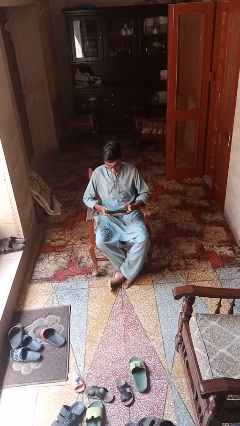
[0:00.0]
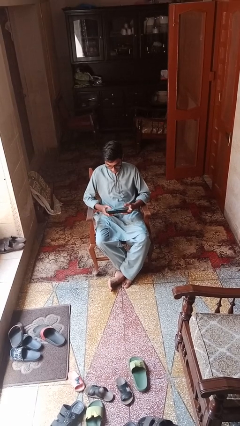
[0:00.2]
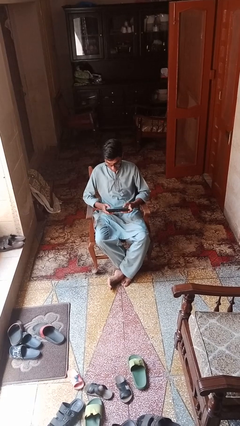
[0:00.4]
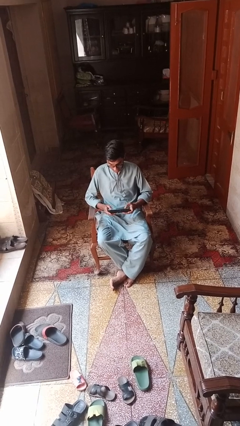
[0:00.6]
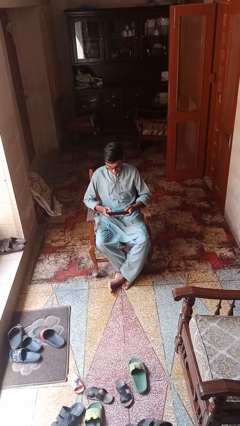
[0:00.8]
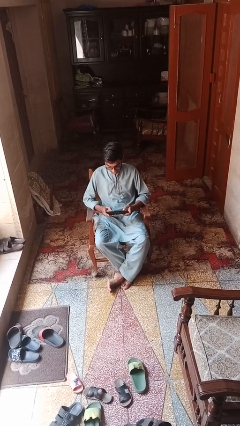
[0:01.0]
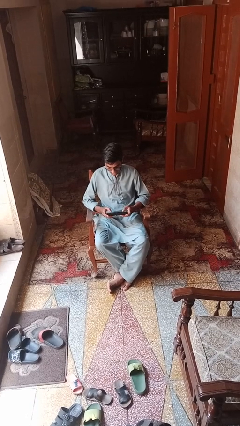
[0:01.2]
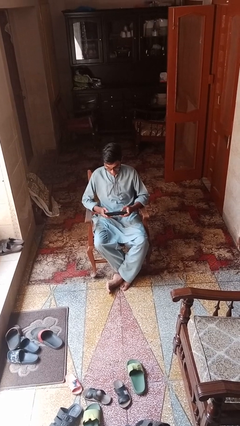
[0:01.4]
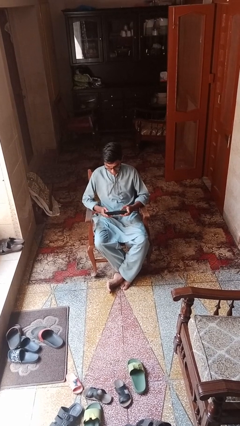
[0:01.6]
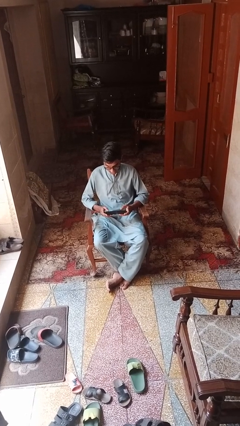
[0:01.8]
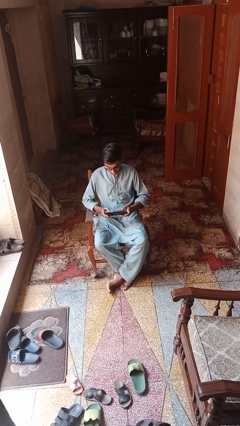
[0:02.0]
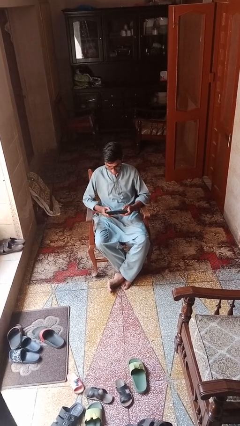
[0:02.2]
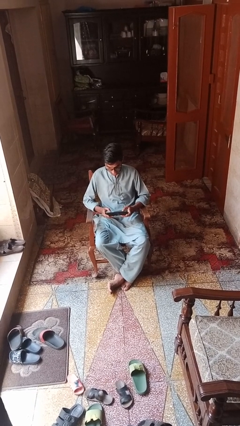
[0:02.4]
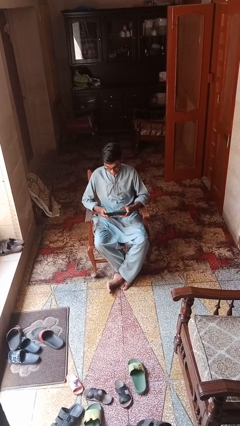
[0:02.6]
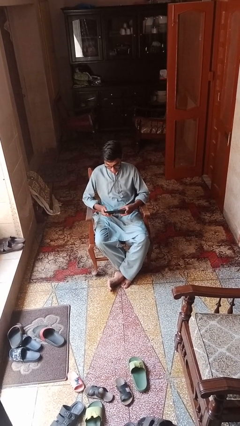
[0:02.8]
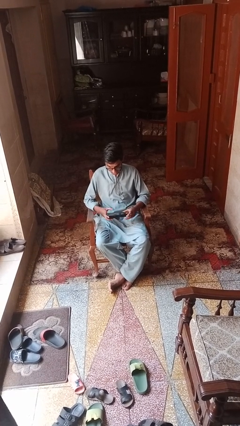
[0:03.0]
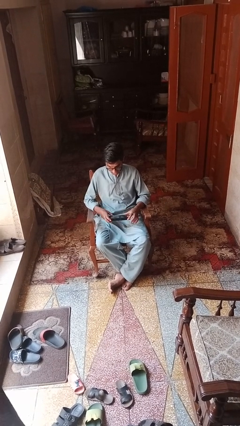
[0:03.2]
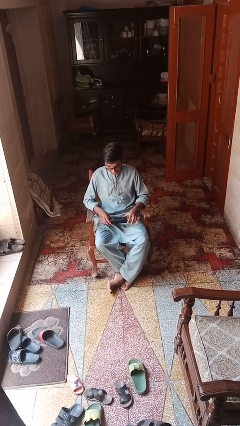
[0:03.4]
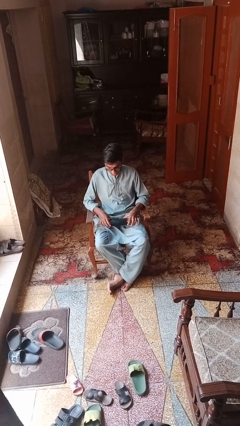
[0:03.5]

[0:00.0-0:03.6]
person interacts with tablet

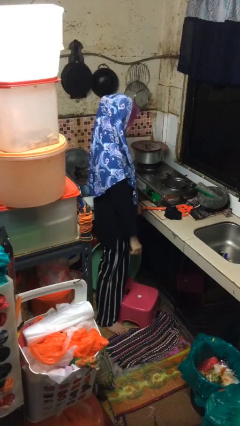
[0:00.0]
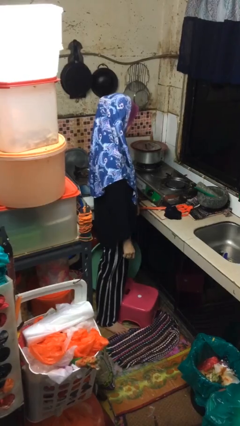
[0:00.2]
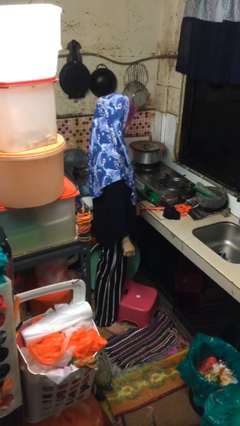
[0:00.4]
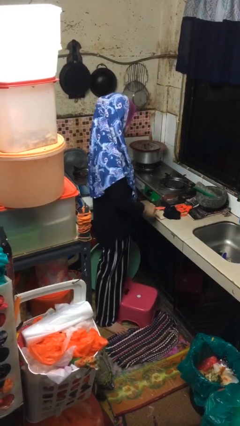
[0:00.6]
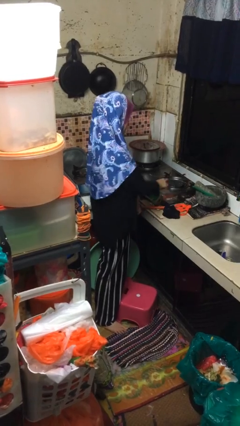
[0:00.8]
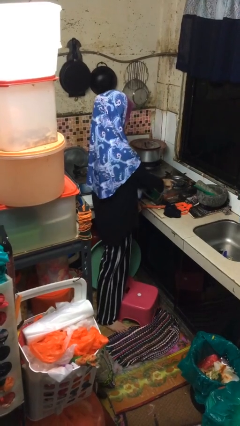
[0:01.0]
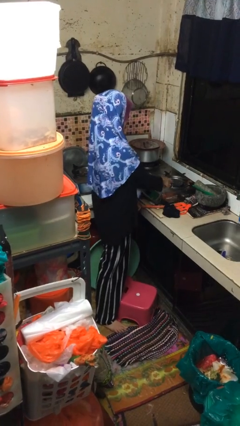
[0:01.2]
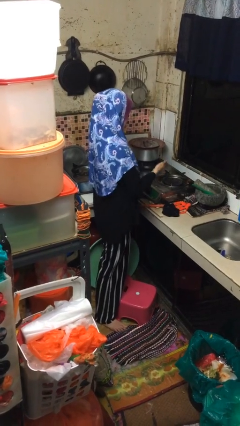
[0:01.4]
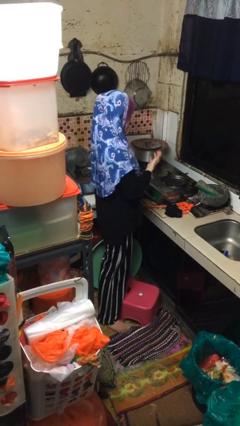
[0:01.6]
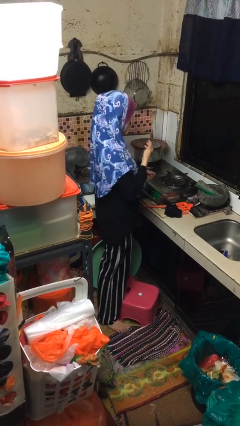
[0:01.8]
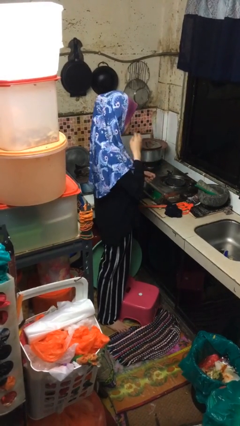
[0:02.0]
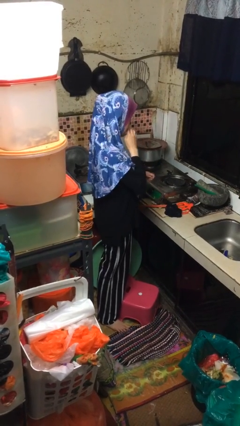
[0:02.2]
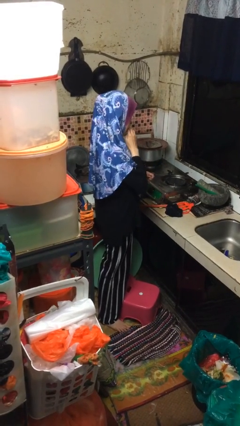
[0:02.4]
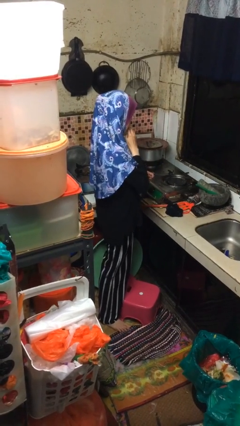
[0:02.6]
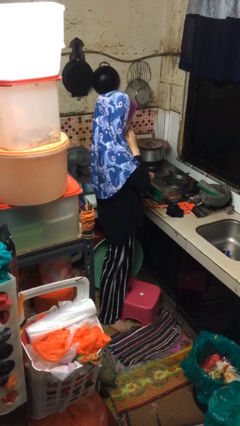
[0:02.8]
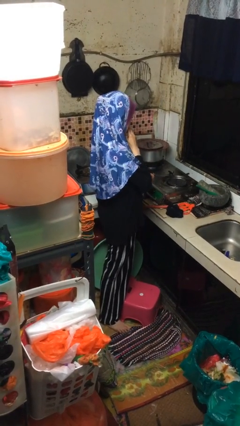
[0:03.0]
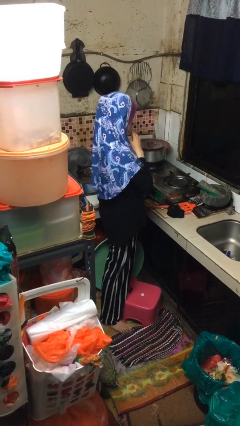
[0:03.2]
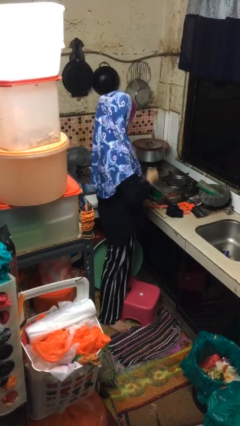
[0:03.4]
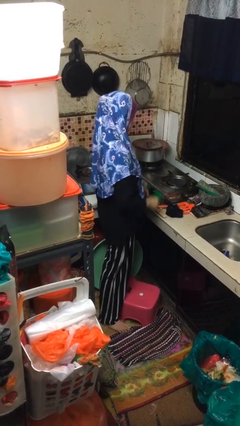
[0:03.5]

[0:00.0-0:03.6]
person burns hand

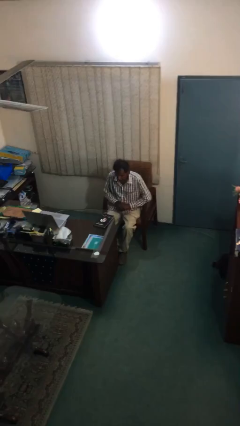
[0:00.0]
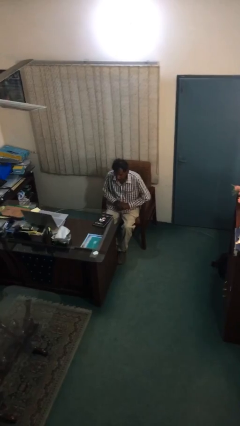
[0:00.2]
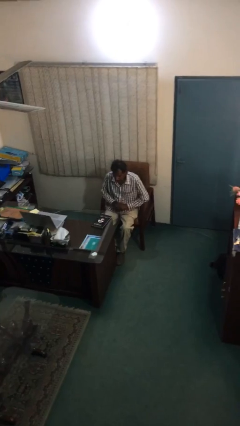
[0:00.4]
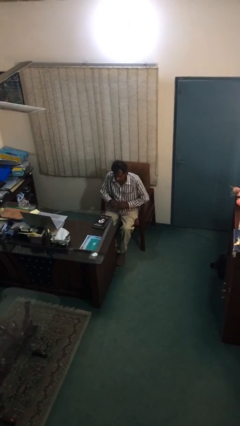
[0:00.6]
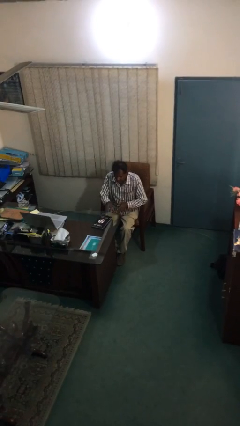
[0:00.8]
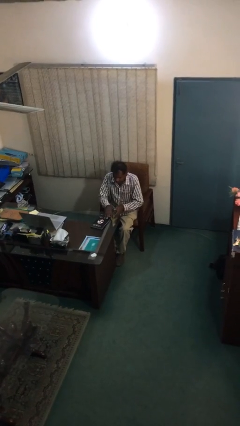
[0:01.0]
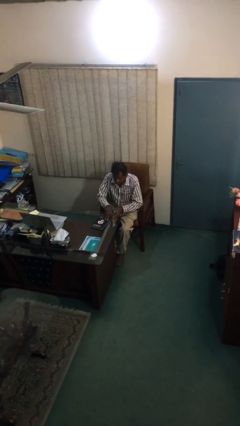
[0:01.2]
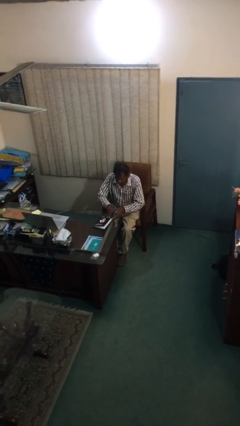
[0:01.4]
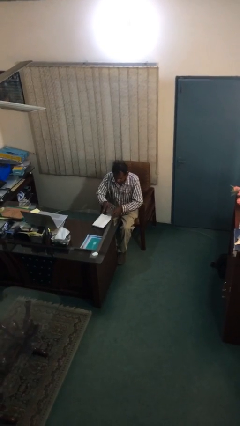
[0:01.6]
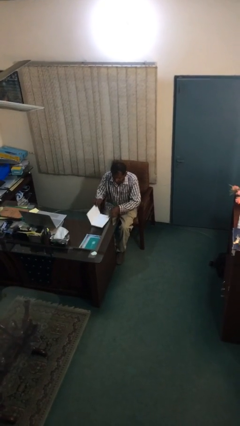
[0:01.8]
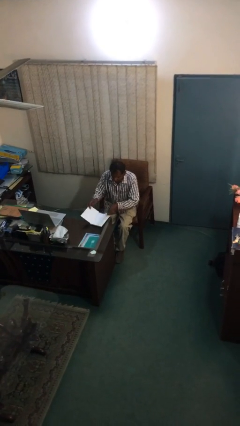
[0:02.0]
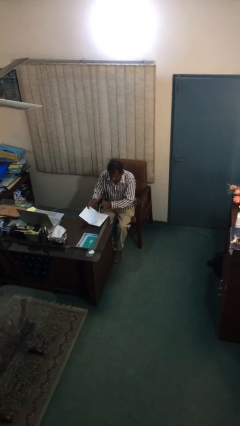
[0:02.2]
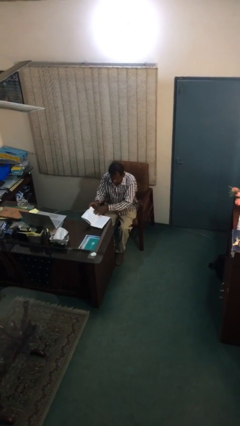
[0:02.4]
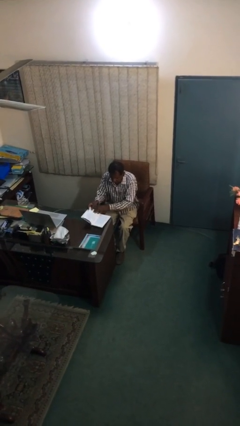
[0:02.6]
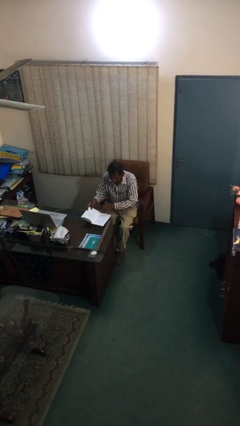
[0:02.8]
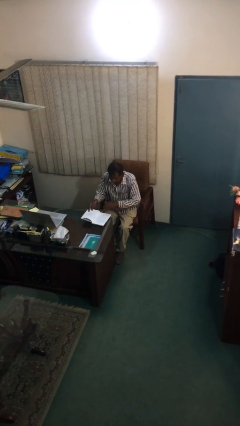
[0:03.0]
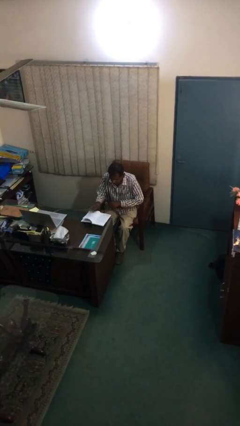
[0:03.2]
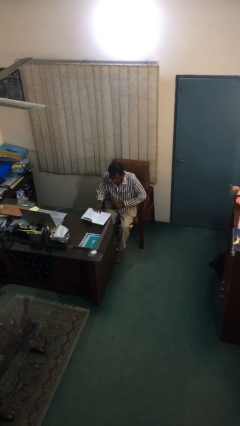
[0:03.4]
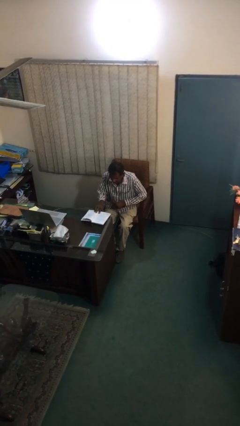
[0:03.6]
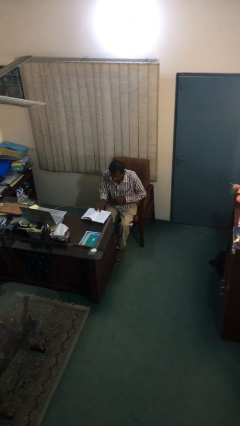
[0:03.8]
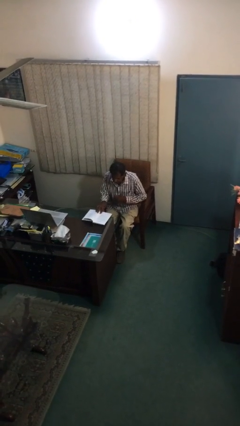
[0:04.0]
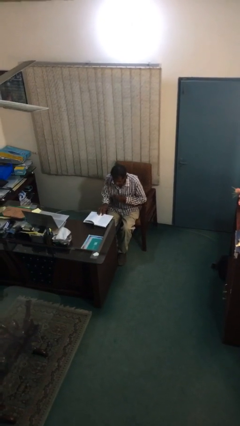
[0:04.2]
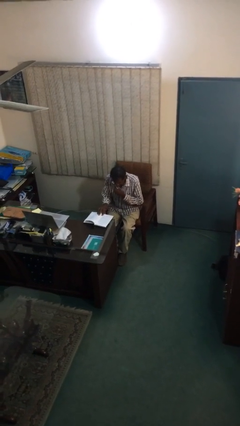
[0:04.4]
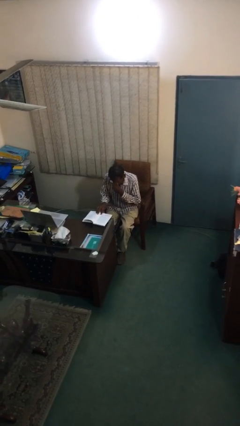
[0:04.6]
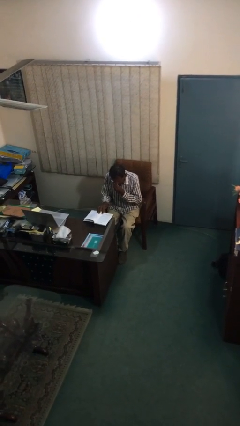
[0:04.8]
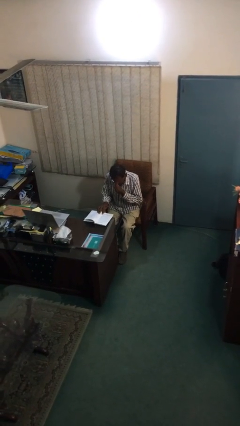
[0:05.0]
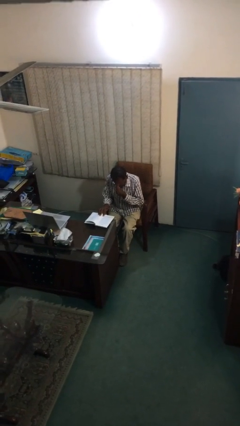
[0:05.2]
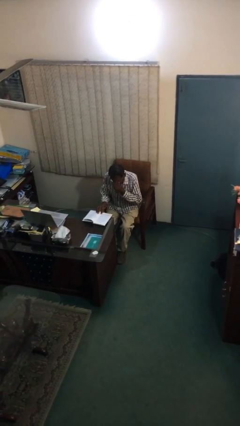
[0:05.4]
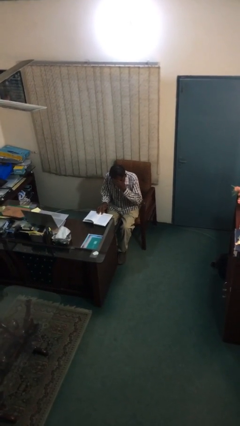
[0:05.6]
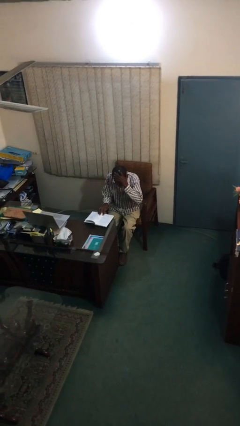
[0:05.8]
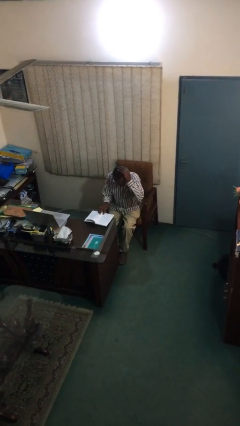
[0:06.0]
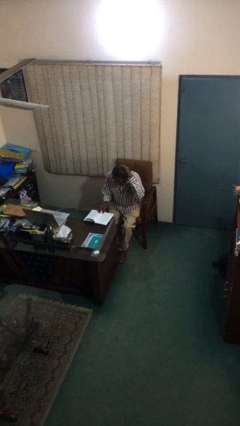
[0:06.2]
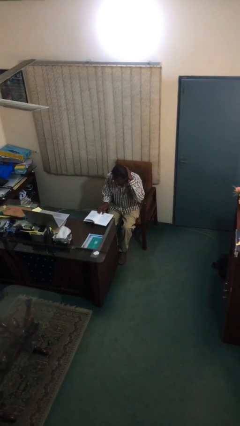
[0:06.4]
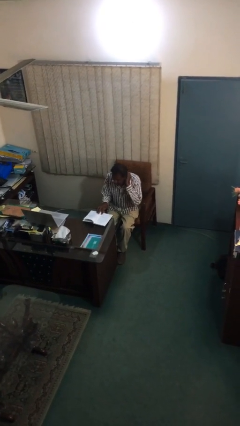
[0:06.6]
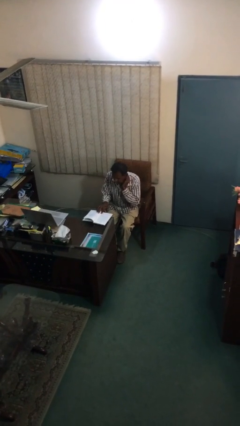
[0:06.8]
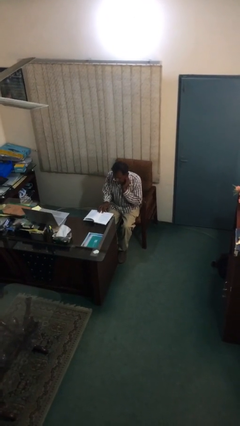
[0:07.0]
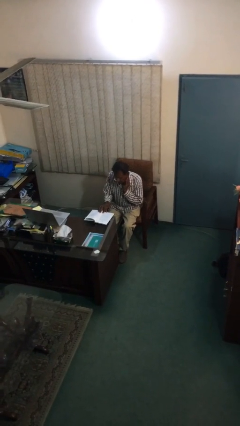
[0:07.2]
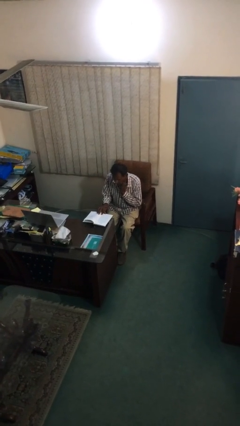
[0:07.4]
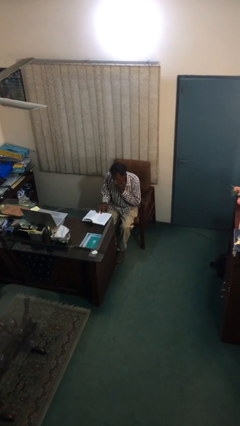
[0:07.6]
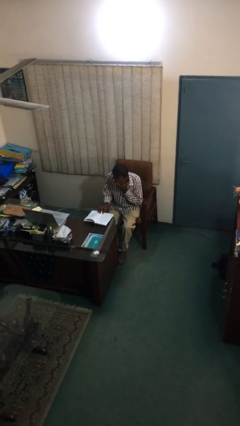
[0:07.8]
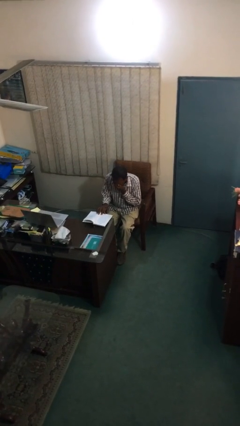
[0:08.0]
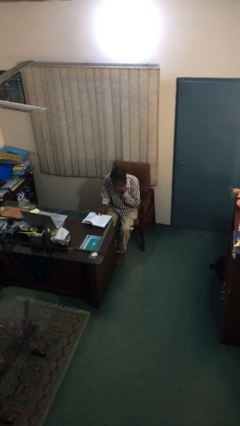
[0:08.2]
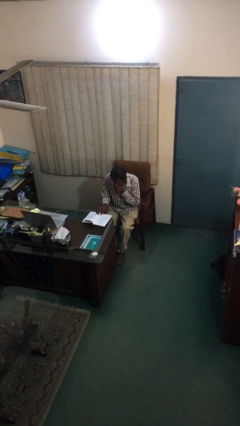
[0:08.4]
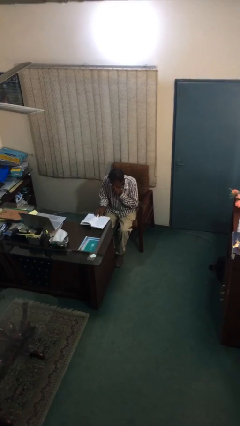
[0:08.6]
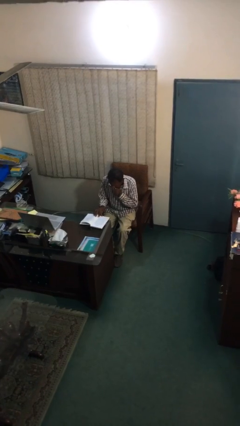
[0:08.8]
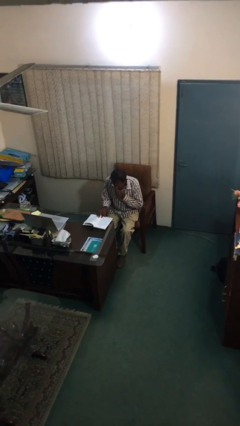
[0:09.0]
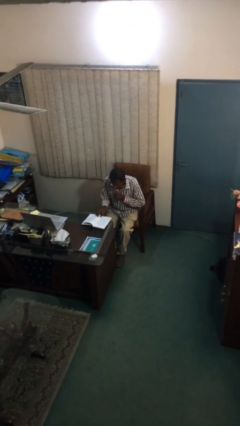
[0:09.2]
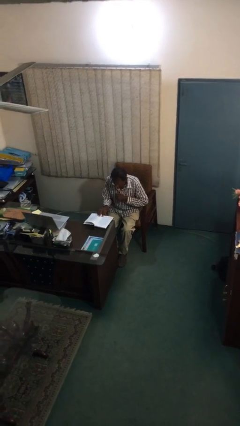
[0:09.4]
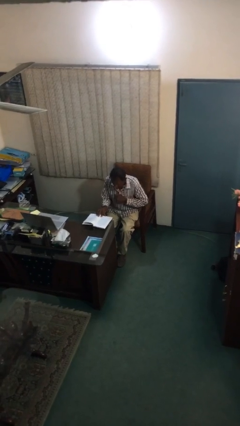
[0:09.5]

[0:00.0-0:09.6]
person reads document

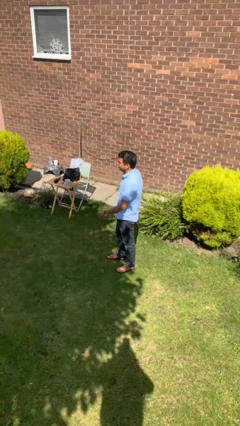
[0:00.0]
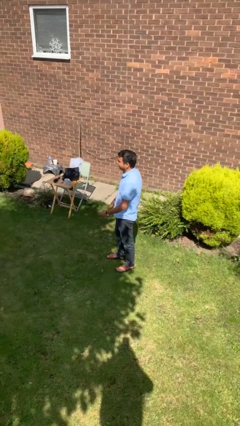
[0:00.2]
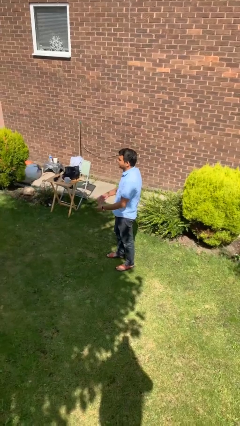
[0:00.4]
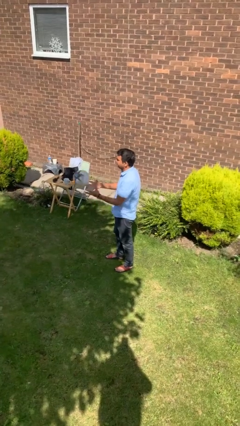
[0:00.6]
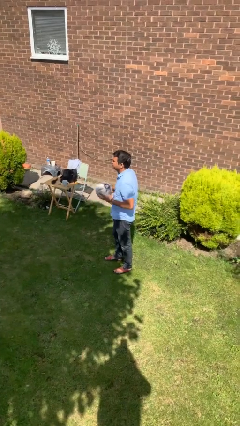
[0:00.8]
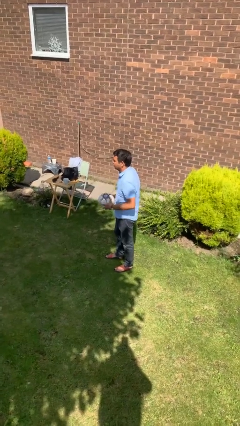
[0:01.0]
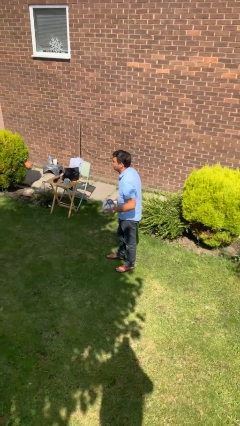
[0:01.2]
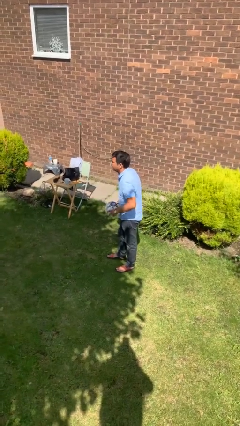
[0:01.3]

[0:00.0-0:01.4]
person catches object from person
